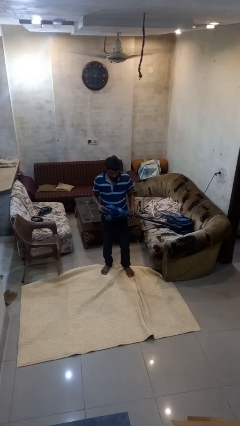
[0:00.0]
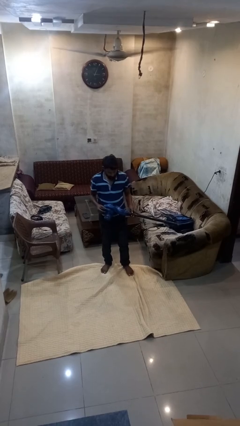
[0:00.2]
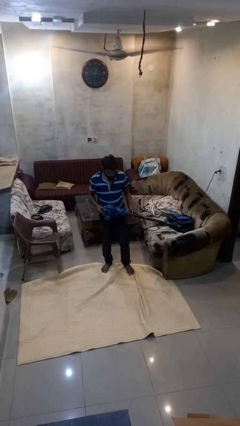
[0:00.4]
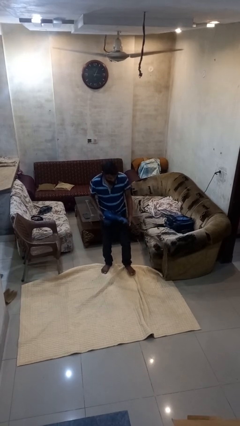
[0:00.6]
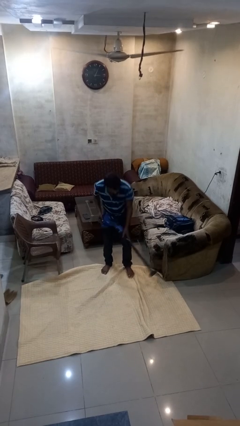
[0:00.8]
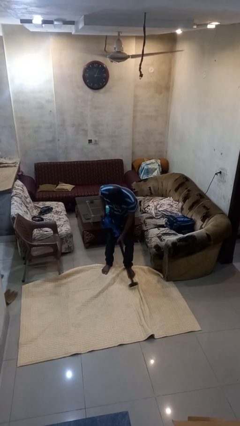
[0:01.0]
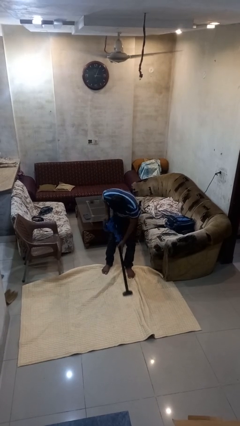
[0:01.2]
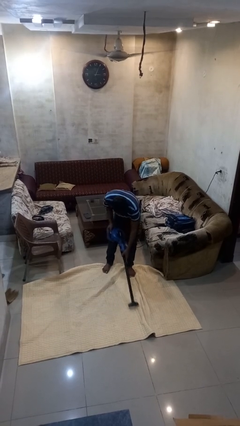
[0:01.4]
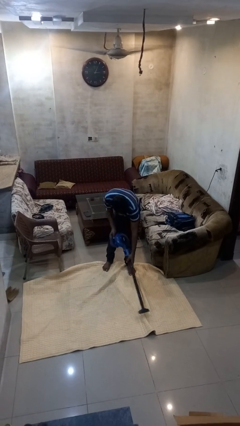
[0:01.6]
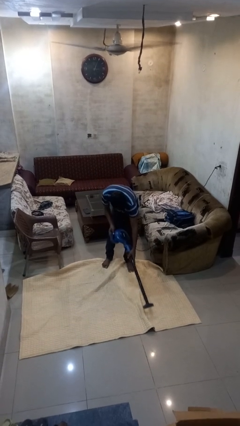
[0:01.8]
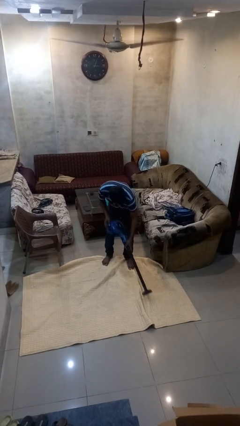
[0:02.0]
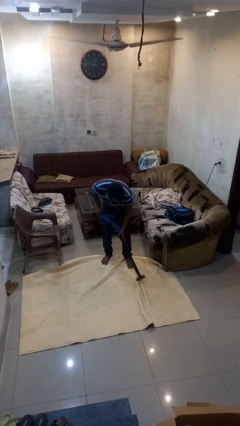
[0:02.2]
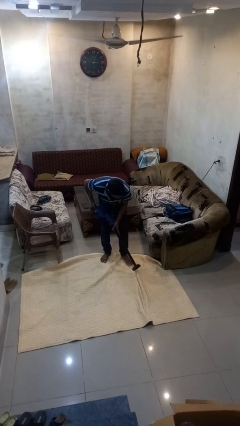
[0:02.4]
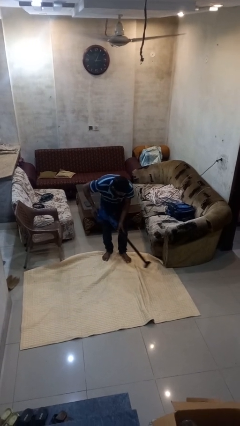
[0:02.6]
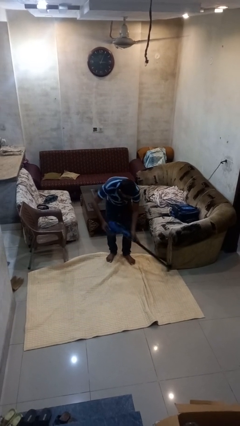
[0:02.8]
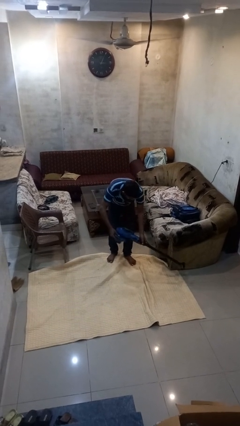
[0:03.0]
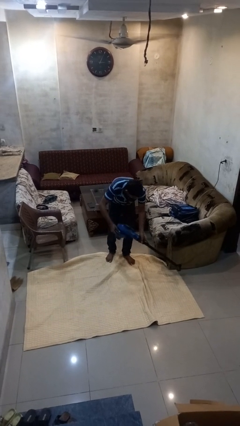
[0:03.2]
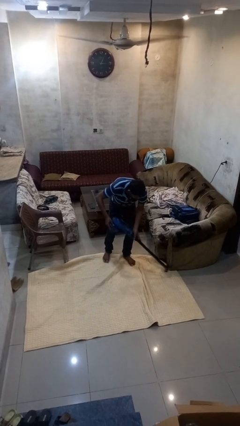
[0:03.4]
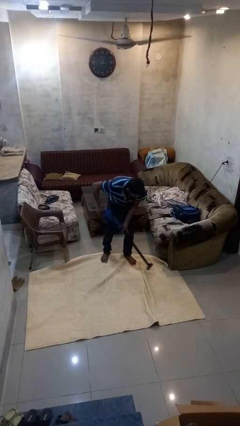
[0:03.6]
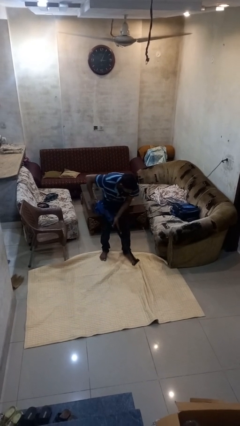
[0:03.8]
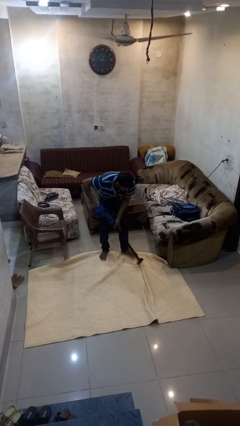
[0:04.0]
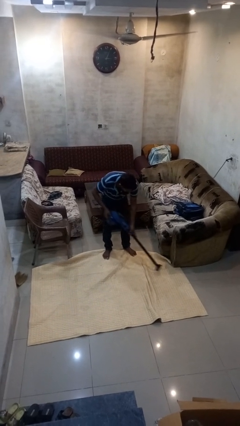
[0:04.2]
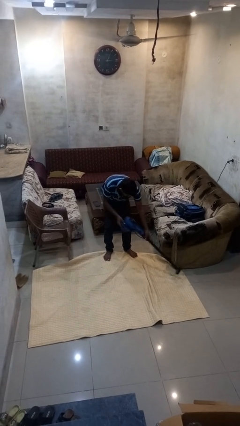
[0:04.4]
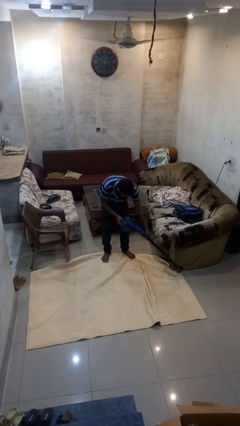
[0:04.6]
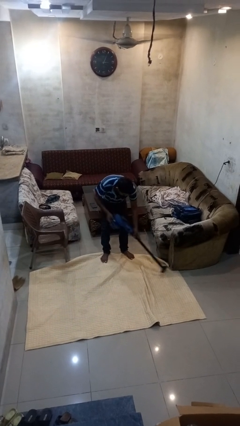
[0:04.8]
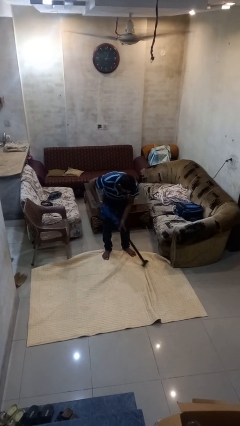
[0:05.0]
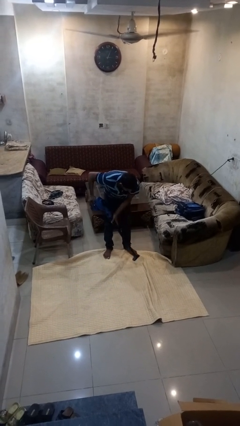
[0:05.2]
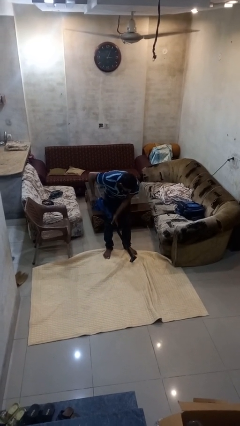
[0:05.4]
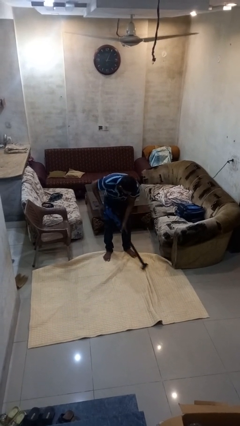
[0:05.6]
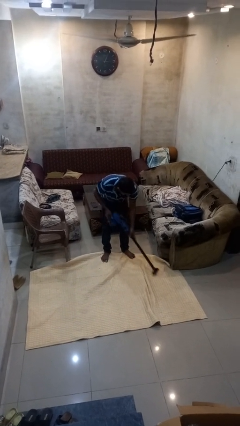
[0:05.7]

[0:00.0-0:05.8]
person vacuums carpet

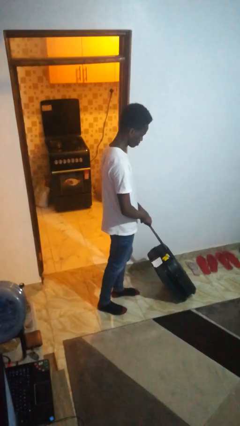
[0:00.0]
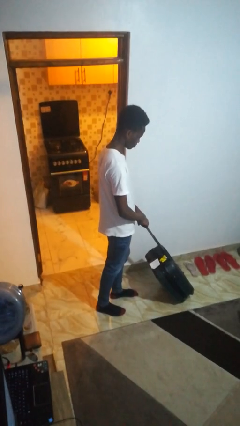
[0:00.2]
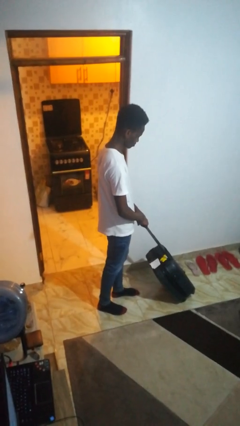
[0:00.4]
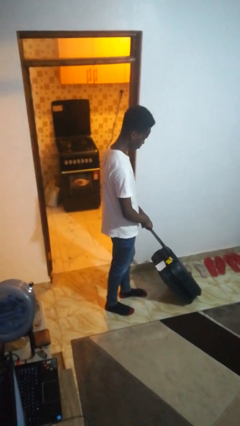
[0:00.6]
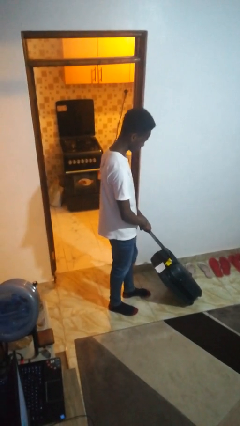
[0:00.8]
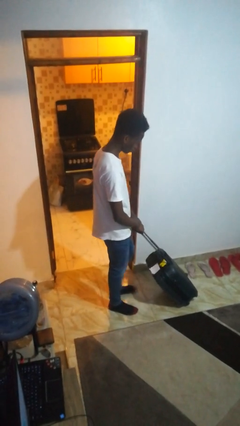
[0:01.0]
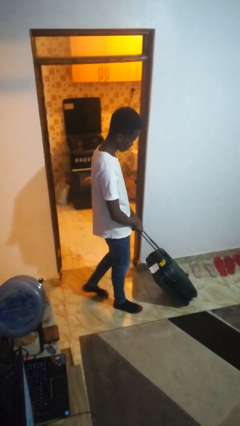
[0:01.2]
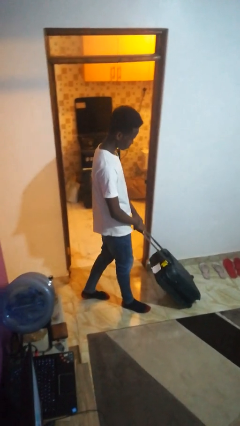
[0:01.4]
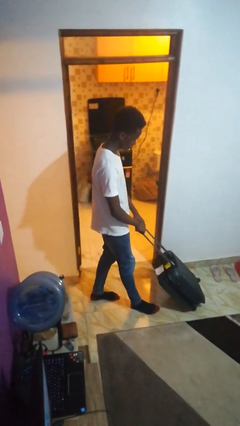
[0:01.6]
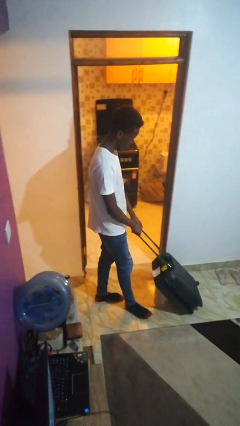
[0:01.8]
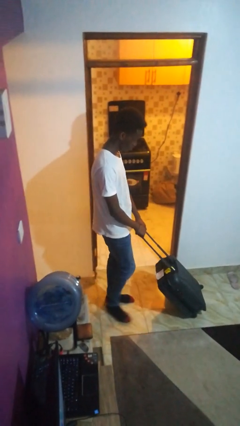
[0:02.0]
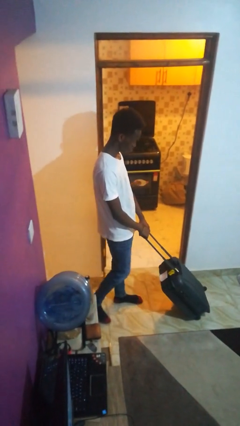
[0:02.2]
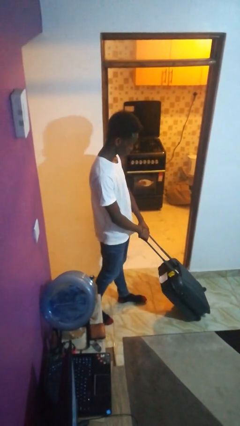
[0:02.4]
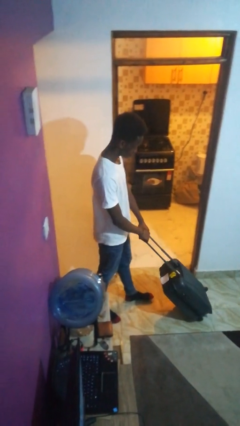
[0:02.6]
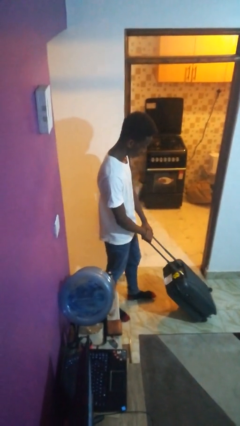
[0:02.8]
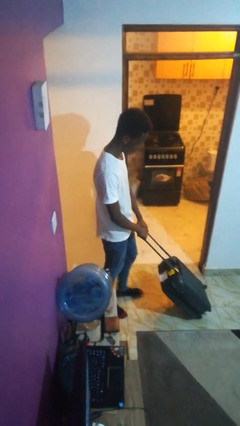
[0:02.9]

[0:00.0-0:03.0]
person pulls wheeled cart

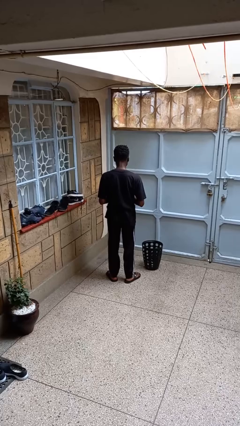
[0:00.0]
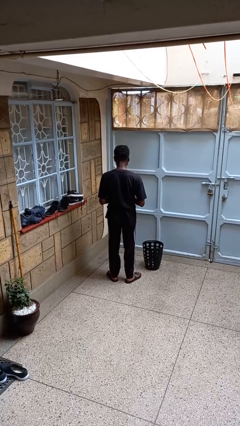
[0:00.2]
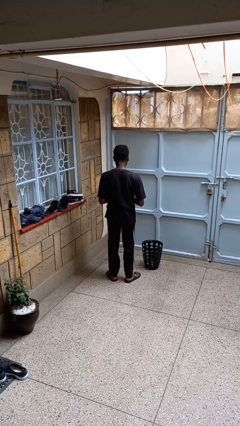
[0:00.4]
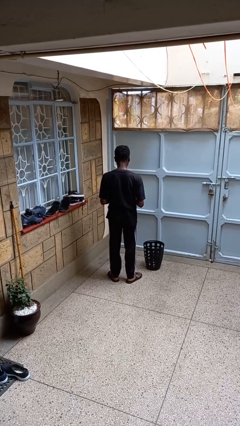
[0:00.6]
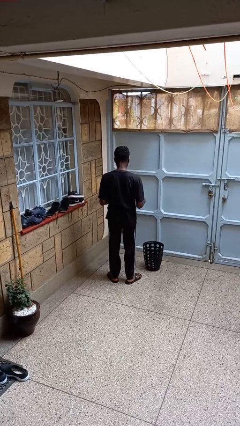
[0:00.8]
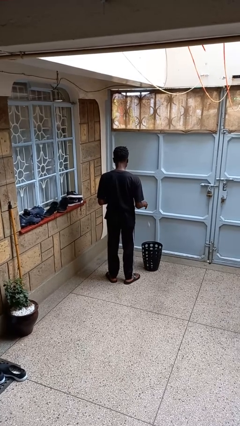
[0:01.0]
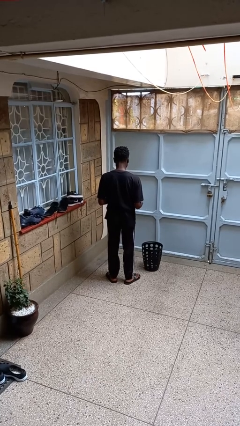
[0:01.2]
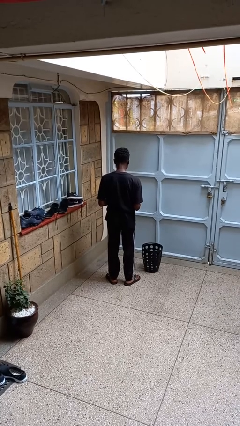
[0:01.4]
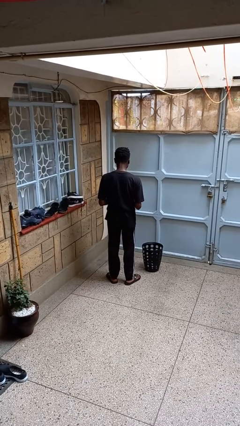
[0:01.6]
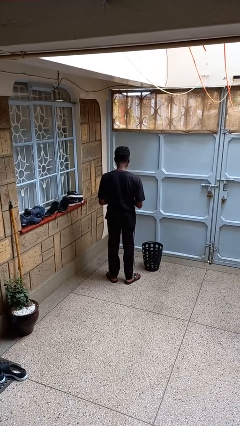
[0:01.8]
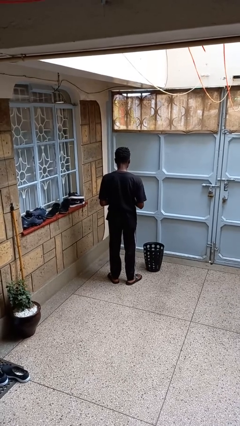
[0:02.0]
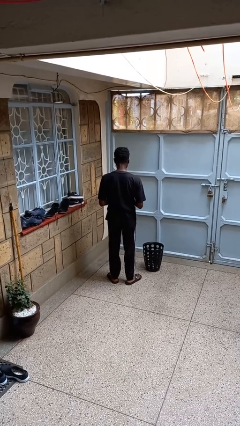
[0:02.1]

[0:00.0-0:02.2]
person discards trash

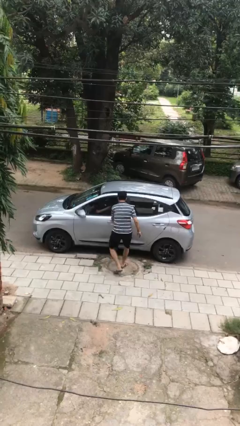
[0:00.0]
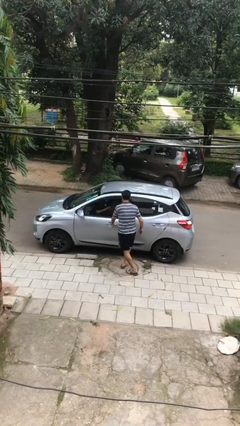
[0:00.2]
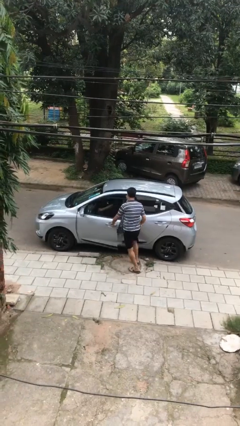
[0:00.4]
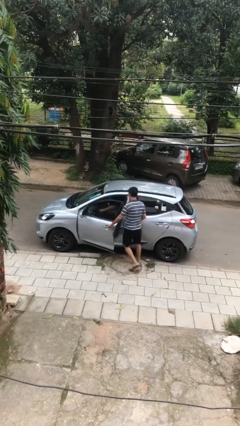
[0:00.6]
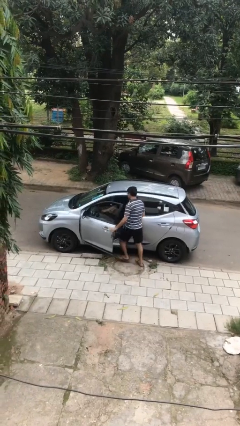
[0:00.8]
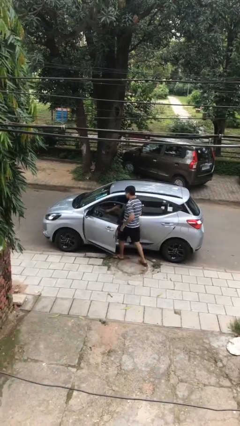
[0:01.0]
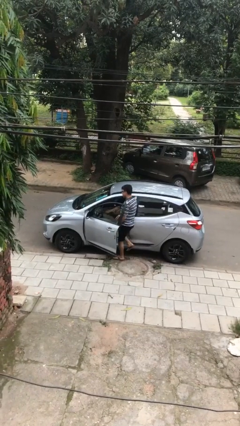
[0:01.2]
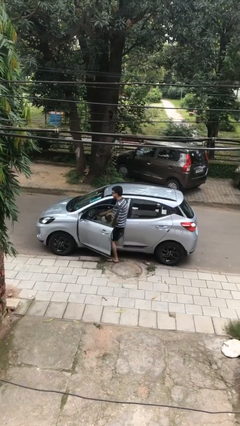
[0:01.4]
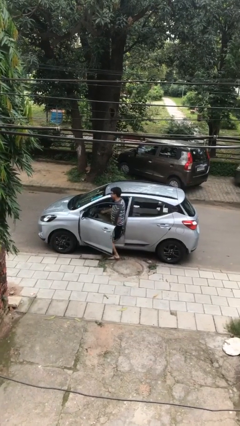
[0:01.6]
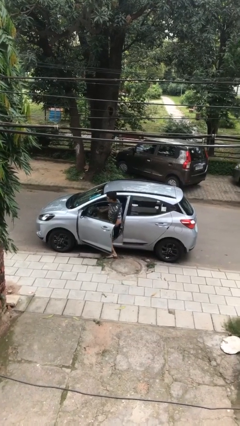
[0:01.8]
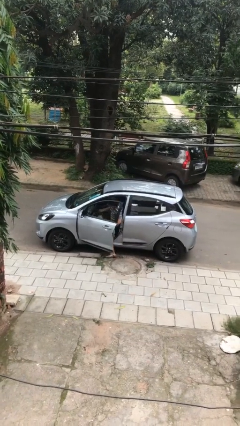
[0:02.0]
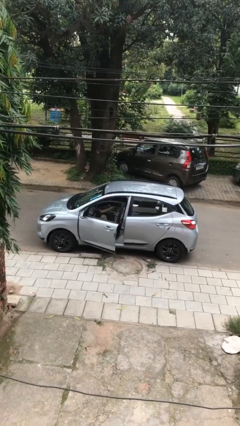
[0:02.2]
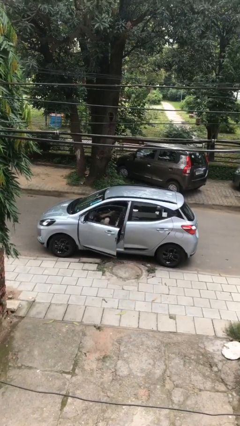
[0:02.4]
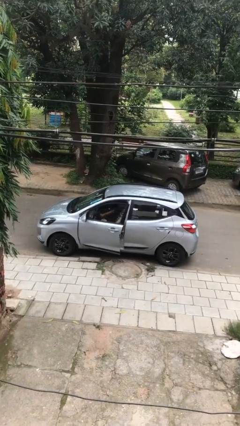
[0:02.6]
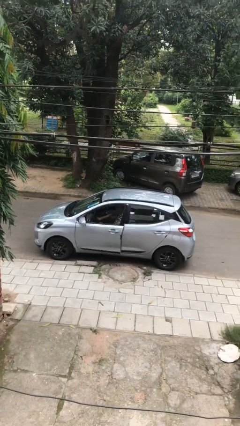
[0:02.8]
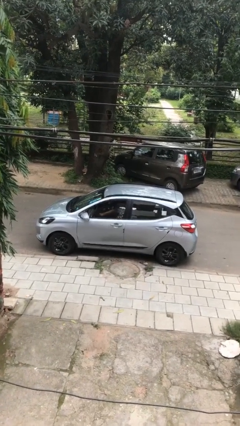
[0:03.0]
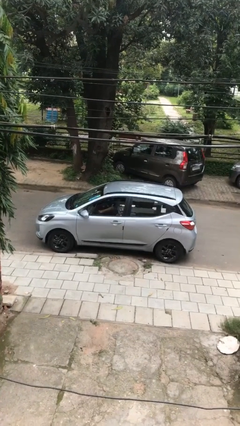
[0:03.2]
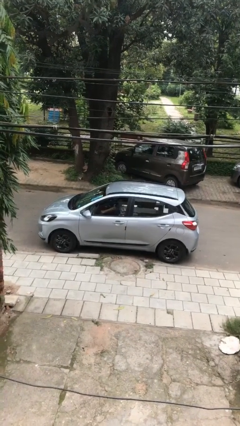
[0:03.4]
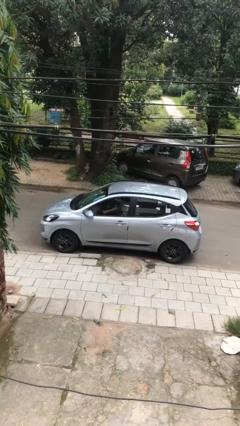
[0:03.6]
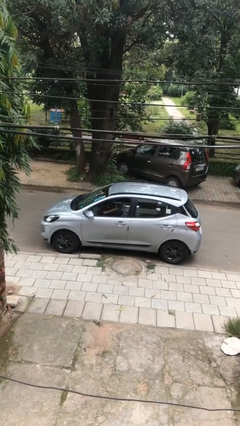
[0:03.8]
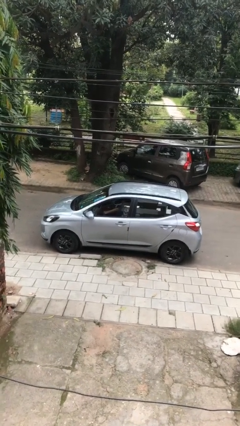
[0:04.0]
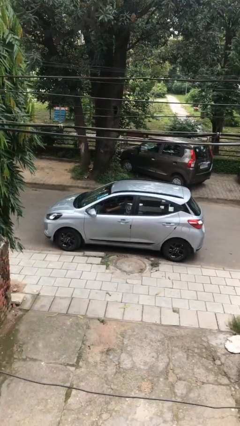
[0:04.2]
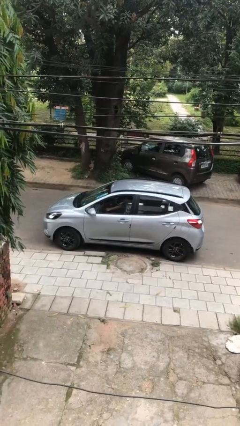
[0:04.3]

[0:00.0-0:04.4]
car picks up person

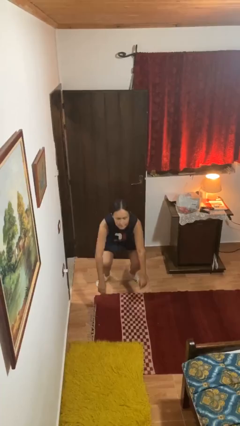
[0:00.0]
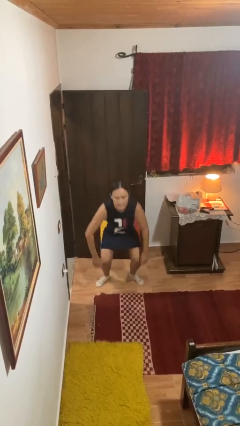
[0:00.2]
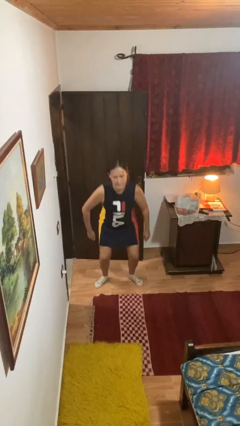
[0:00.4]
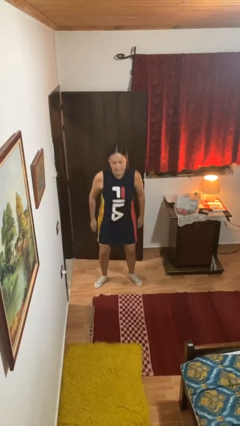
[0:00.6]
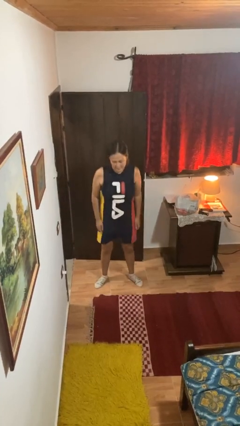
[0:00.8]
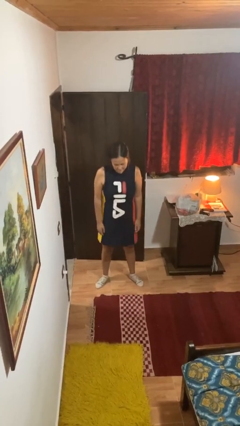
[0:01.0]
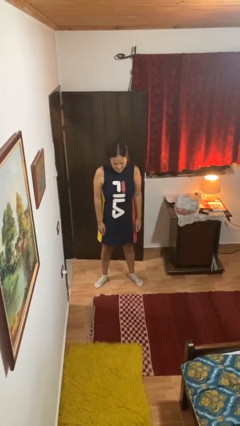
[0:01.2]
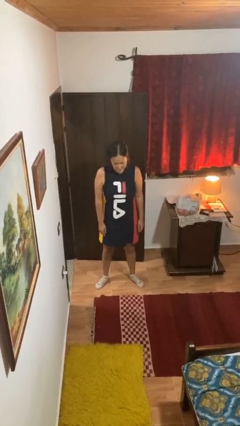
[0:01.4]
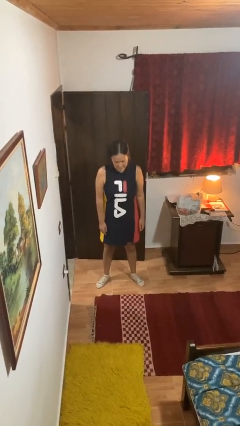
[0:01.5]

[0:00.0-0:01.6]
person stands up

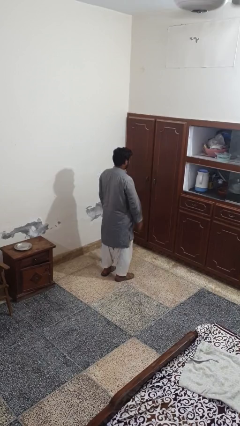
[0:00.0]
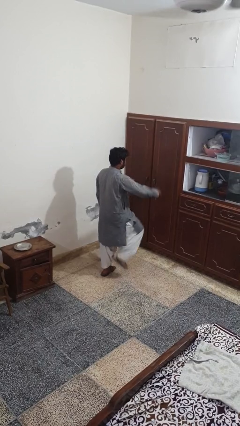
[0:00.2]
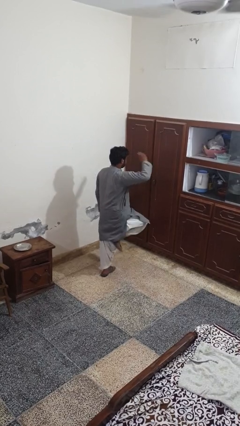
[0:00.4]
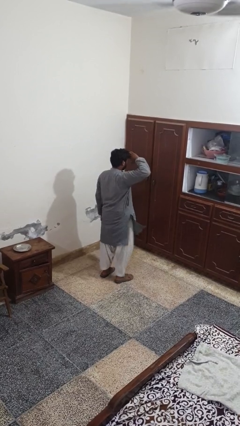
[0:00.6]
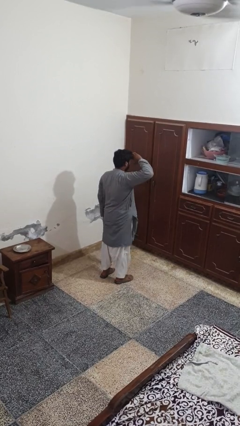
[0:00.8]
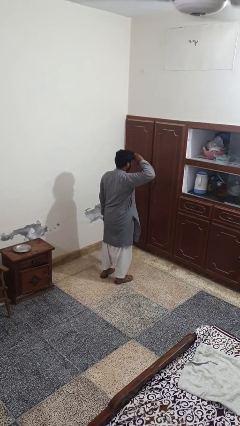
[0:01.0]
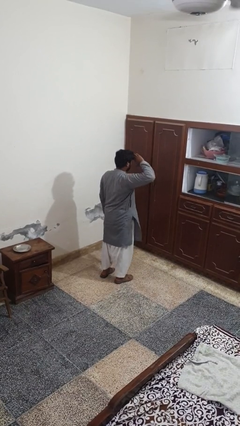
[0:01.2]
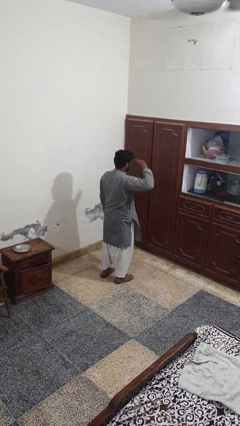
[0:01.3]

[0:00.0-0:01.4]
person salutes
